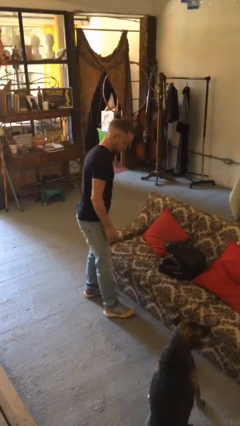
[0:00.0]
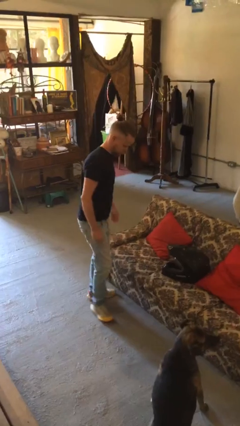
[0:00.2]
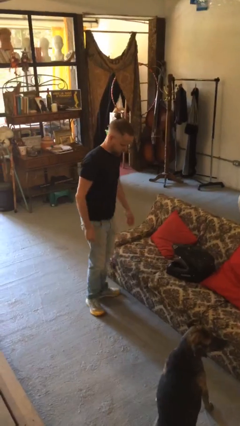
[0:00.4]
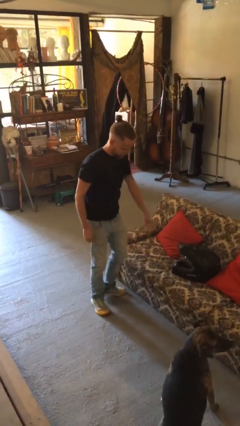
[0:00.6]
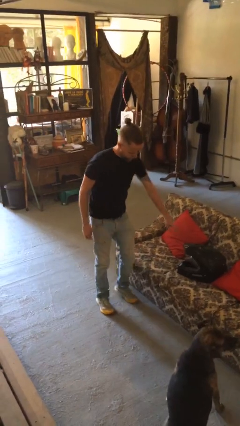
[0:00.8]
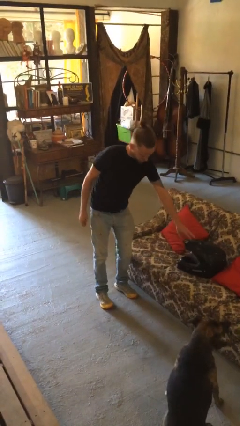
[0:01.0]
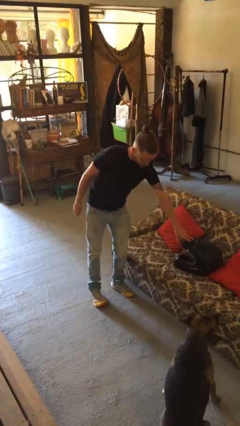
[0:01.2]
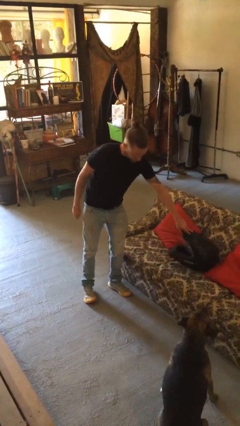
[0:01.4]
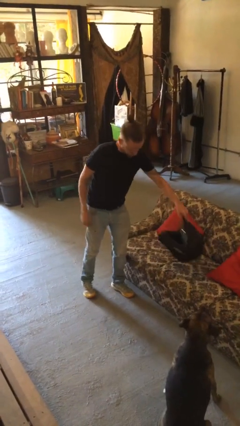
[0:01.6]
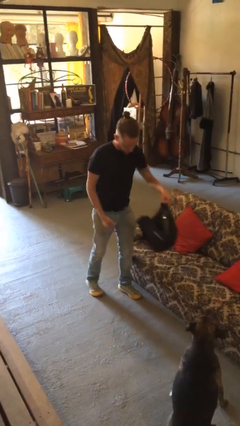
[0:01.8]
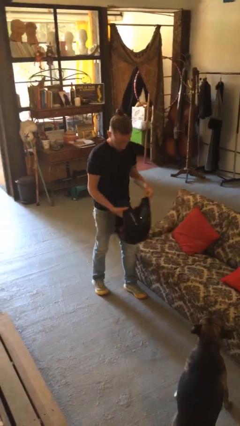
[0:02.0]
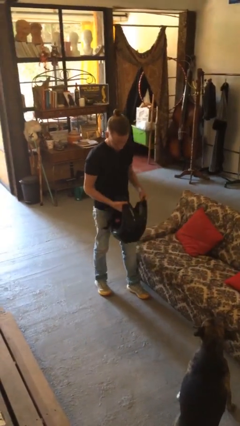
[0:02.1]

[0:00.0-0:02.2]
person picks up object from couch

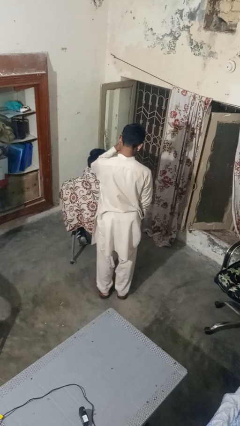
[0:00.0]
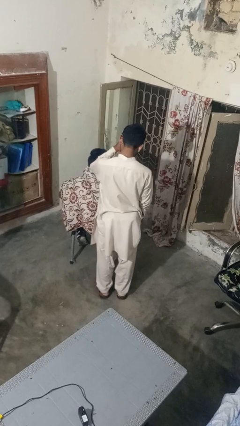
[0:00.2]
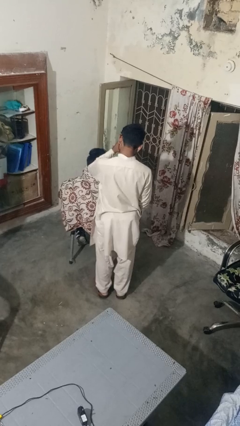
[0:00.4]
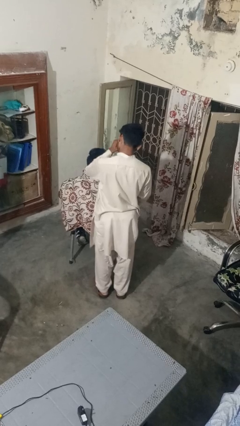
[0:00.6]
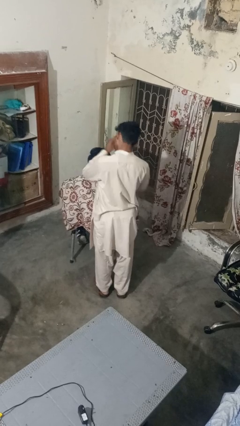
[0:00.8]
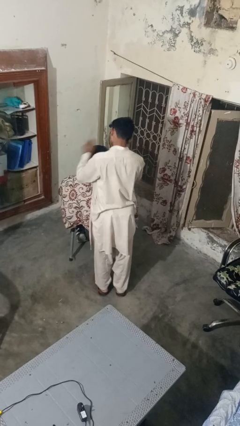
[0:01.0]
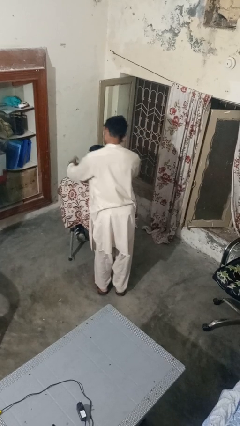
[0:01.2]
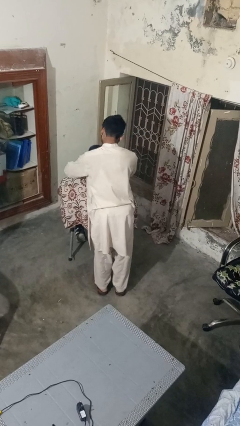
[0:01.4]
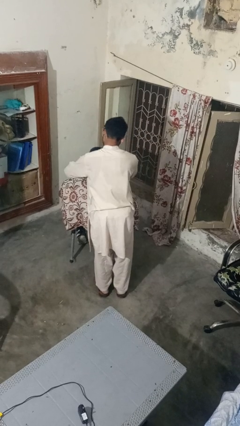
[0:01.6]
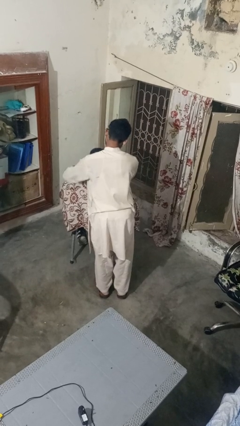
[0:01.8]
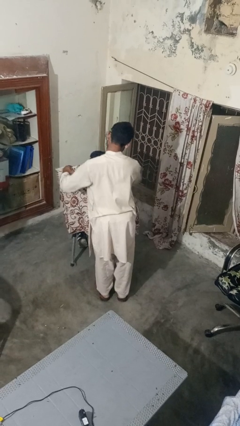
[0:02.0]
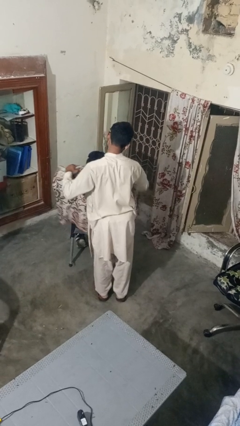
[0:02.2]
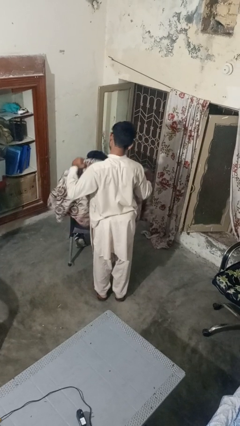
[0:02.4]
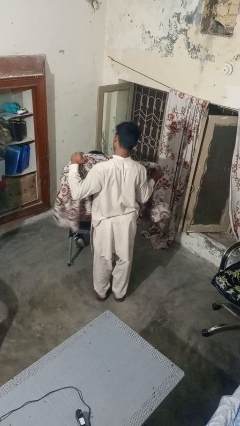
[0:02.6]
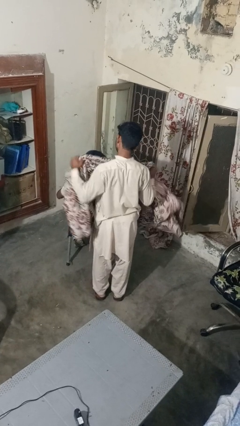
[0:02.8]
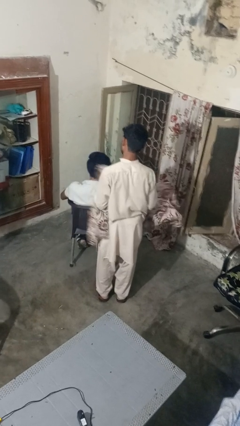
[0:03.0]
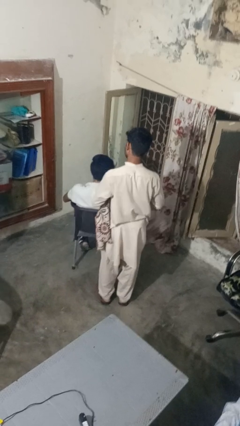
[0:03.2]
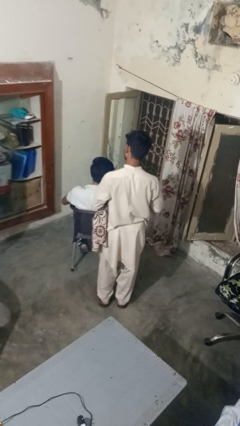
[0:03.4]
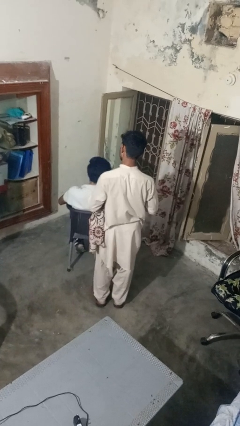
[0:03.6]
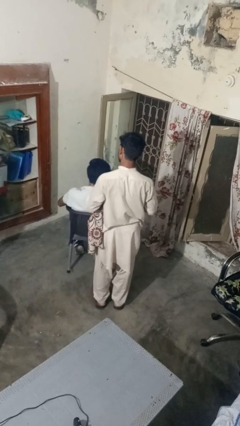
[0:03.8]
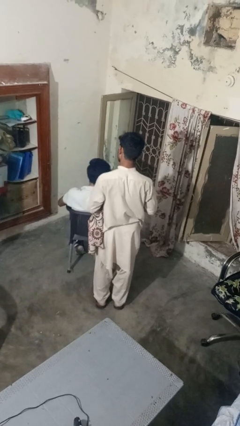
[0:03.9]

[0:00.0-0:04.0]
person uncovers friend with blanket

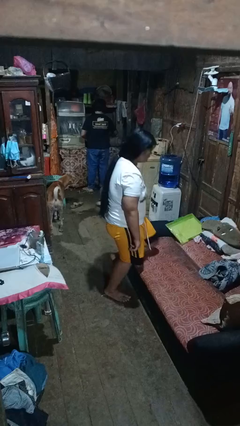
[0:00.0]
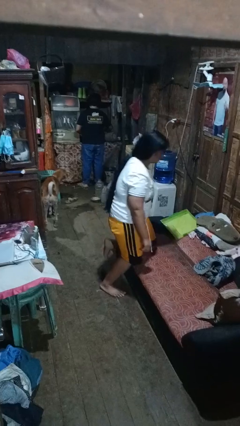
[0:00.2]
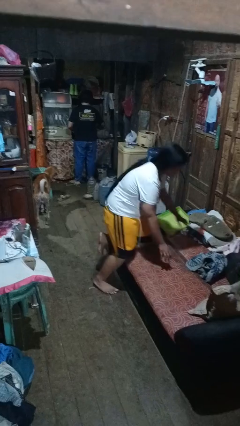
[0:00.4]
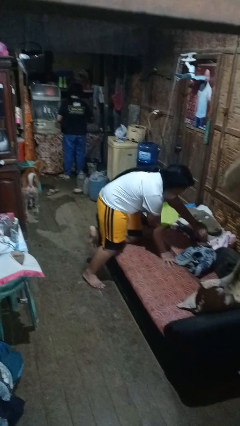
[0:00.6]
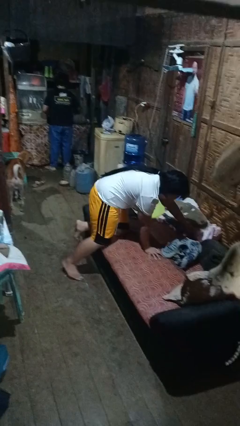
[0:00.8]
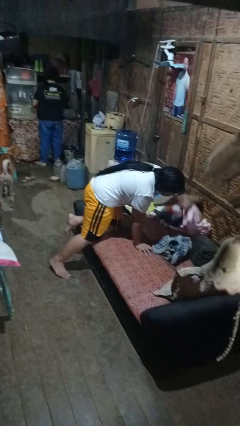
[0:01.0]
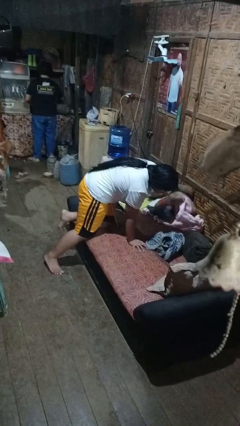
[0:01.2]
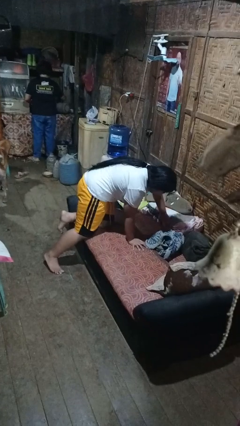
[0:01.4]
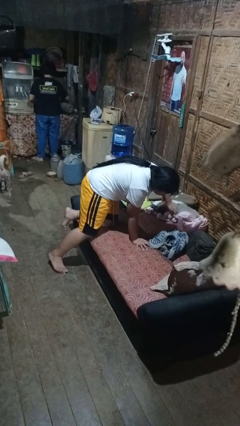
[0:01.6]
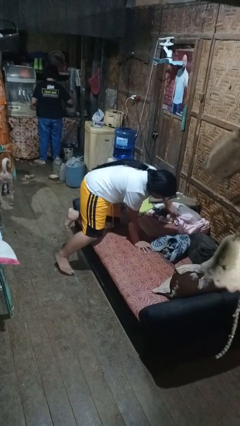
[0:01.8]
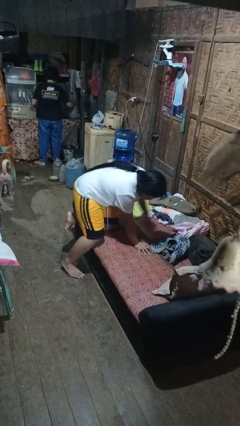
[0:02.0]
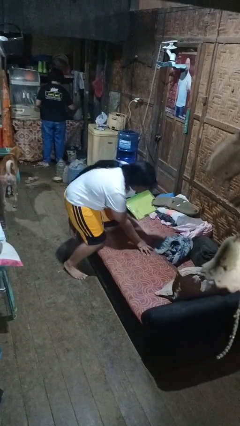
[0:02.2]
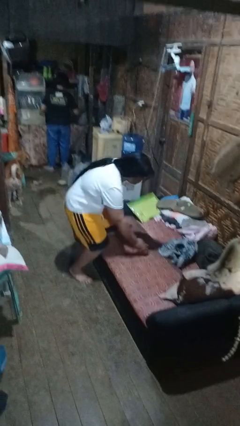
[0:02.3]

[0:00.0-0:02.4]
person searches in couch

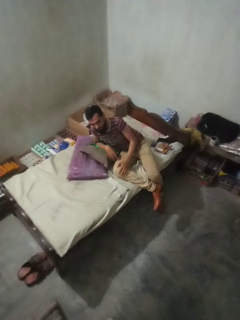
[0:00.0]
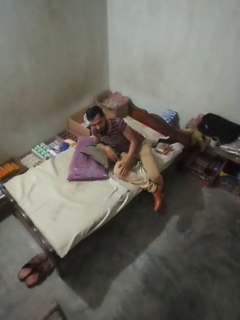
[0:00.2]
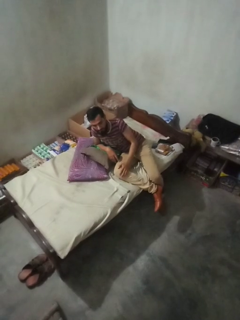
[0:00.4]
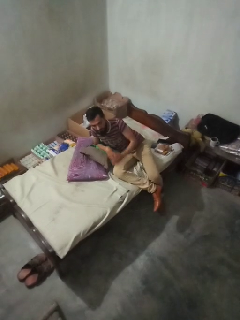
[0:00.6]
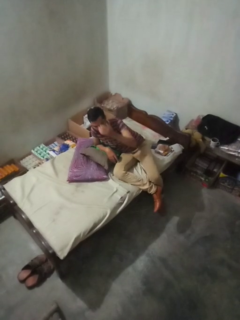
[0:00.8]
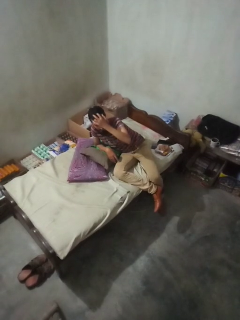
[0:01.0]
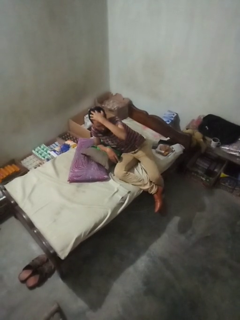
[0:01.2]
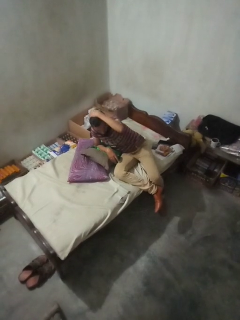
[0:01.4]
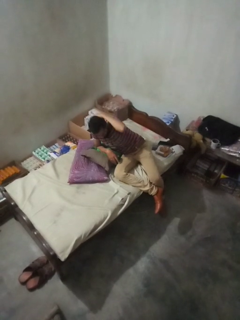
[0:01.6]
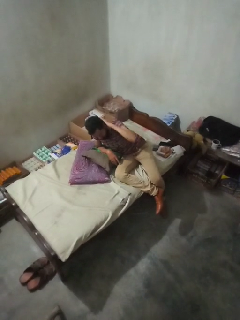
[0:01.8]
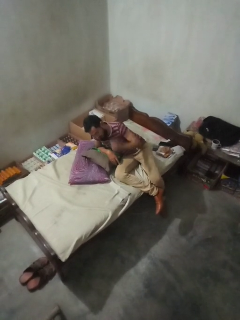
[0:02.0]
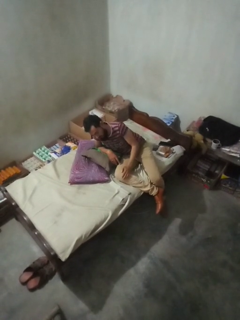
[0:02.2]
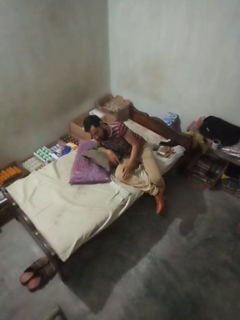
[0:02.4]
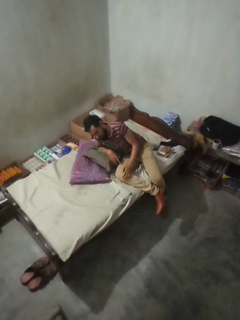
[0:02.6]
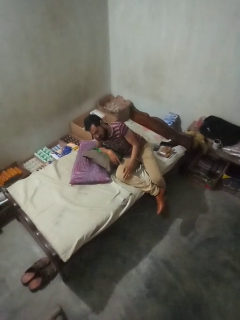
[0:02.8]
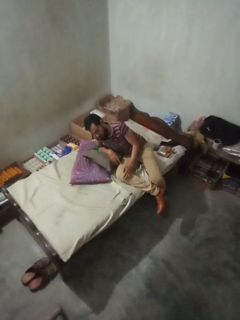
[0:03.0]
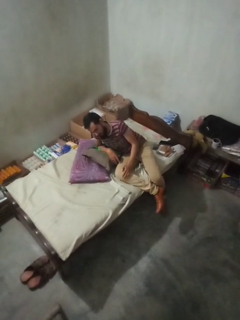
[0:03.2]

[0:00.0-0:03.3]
person strokes hair

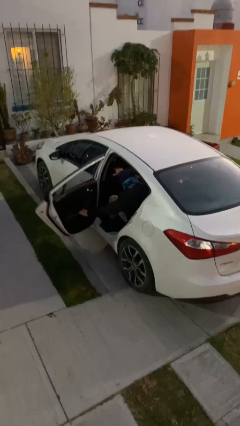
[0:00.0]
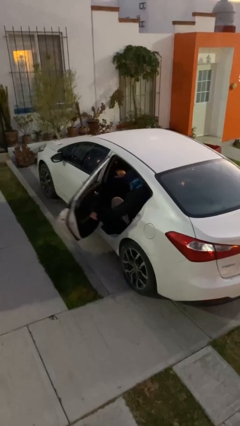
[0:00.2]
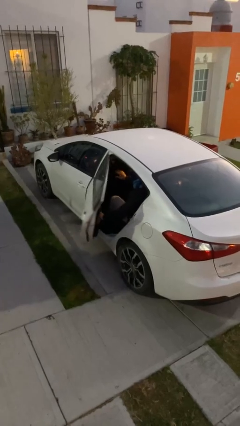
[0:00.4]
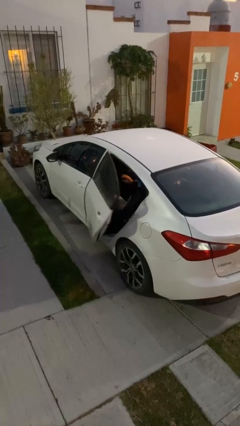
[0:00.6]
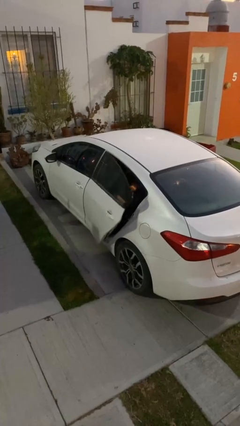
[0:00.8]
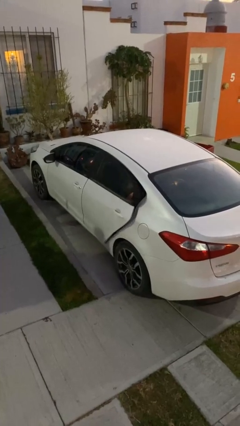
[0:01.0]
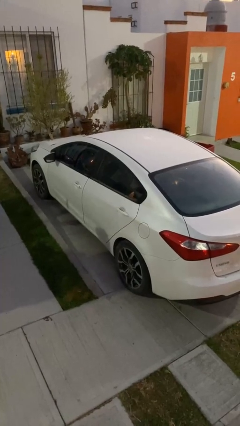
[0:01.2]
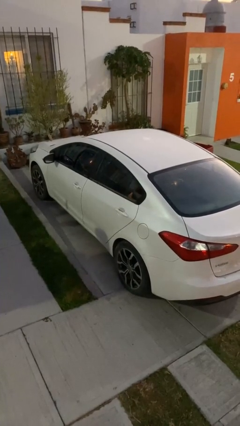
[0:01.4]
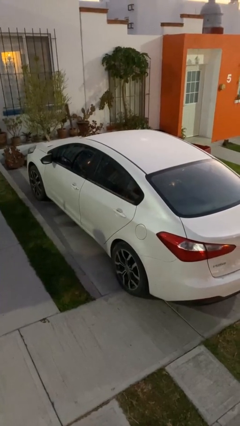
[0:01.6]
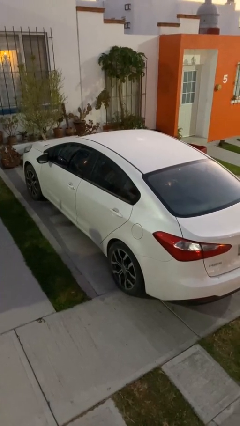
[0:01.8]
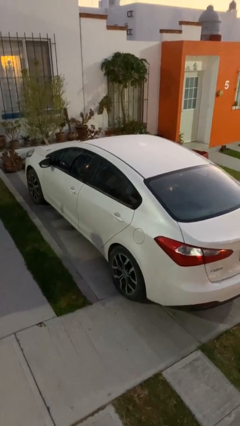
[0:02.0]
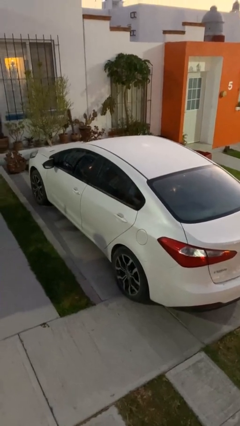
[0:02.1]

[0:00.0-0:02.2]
person closes car door

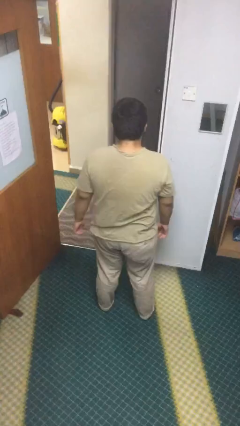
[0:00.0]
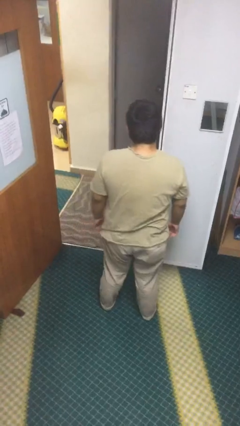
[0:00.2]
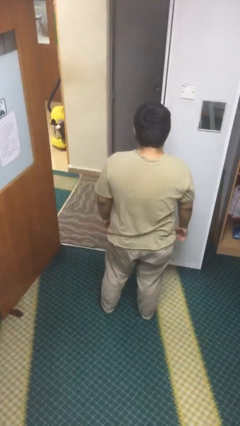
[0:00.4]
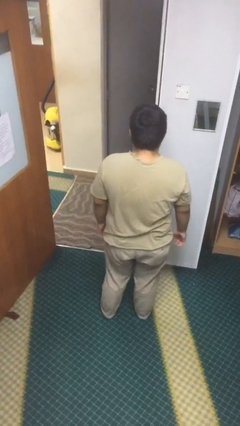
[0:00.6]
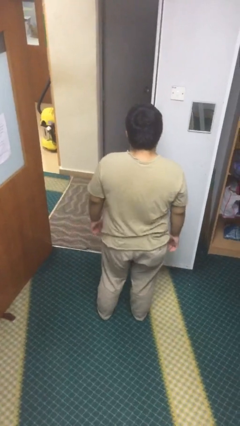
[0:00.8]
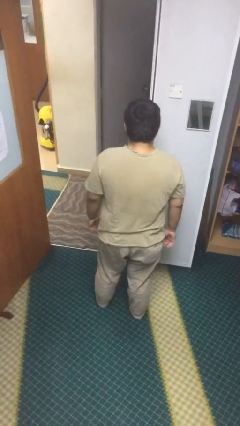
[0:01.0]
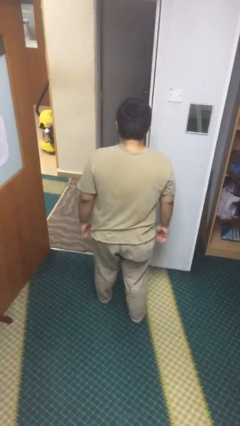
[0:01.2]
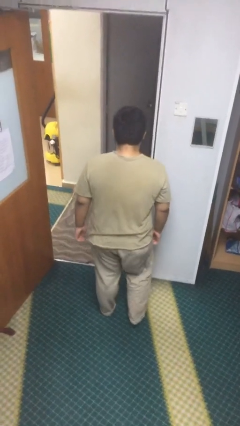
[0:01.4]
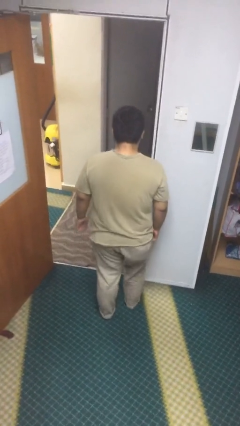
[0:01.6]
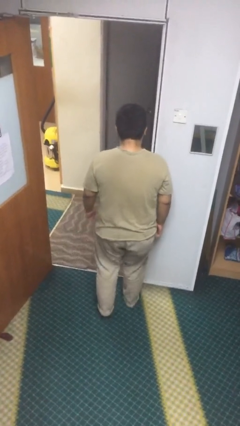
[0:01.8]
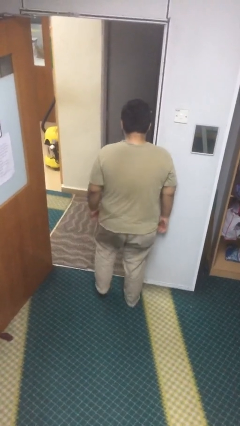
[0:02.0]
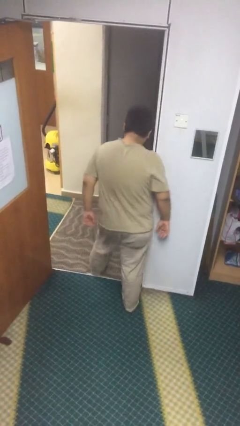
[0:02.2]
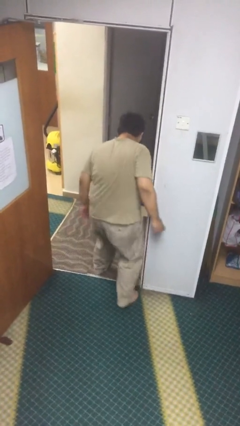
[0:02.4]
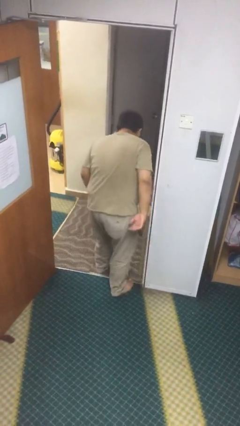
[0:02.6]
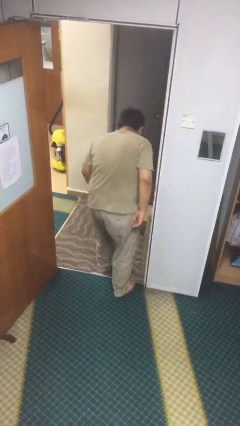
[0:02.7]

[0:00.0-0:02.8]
person bumps into wall

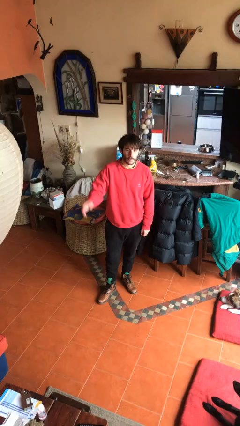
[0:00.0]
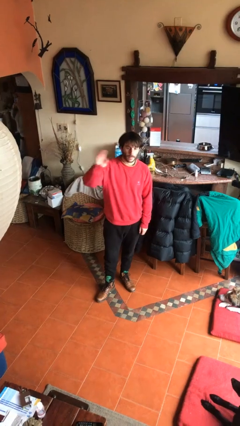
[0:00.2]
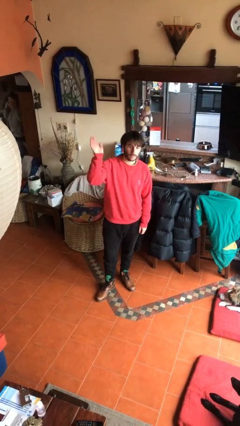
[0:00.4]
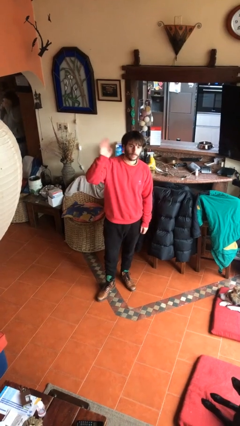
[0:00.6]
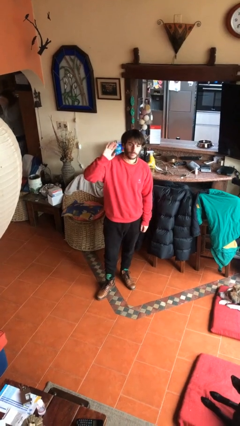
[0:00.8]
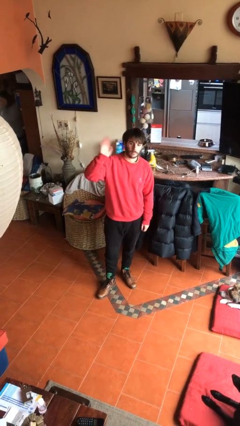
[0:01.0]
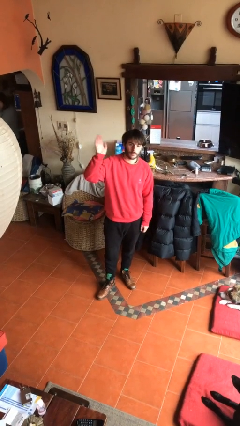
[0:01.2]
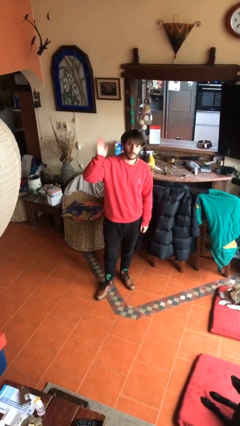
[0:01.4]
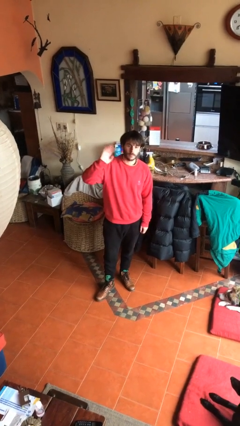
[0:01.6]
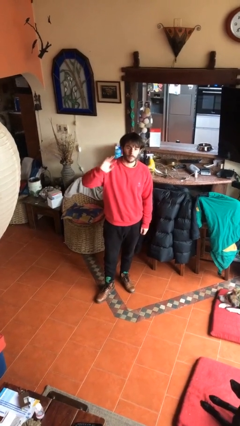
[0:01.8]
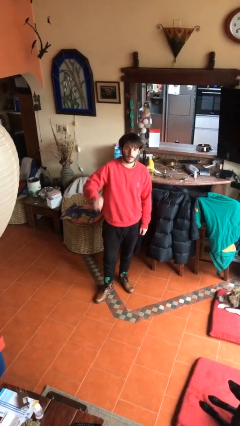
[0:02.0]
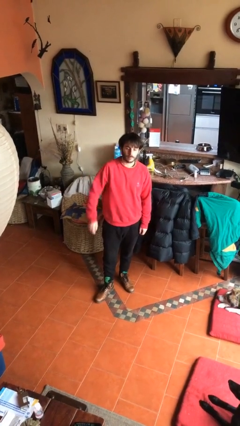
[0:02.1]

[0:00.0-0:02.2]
person waves at person
